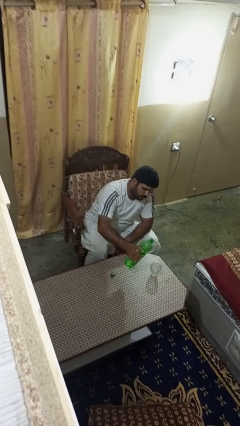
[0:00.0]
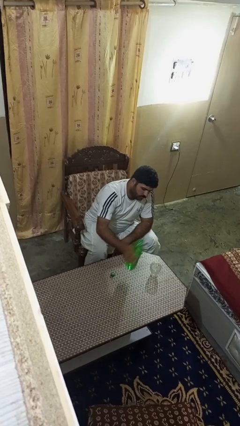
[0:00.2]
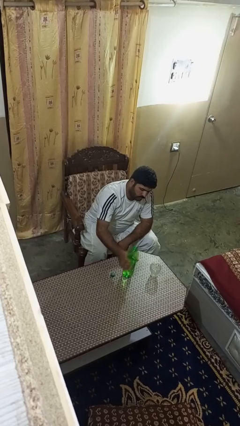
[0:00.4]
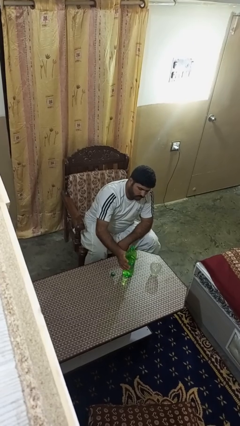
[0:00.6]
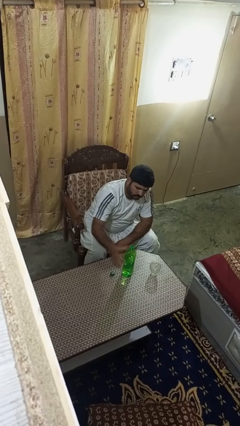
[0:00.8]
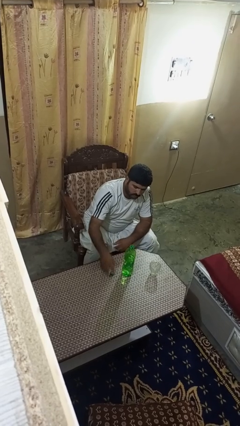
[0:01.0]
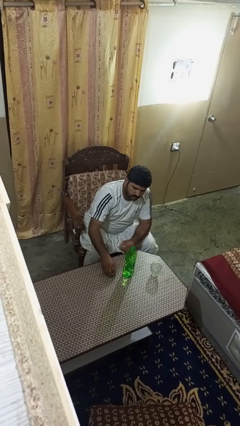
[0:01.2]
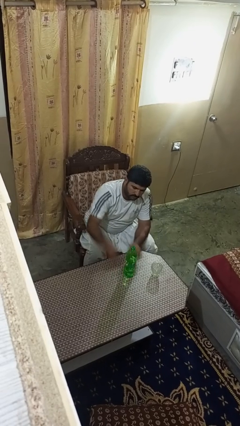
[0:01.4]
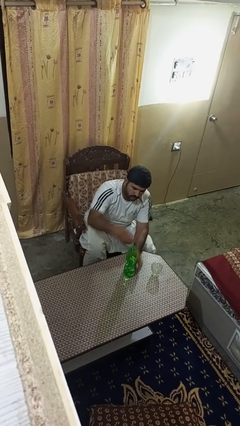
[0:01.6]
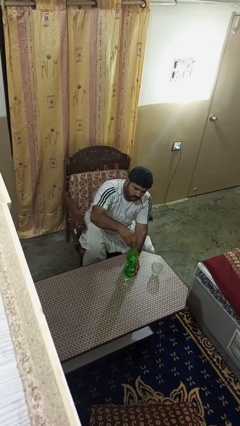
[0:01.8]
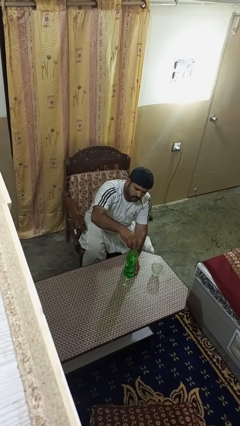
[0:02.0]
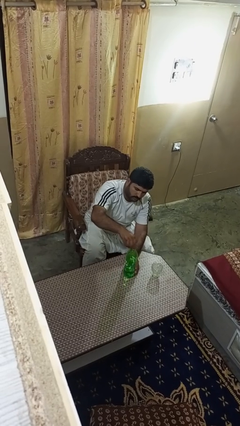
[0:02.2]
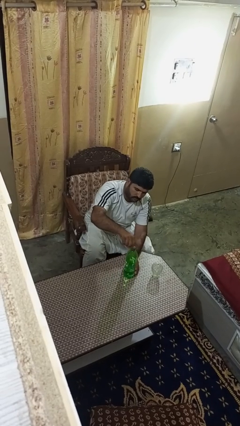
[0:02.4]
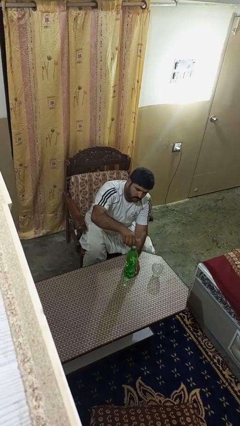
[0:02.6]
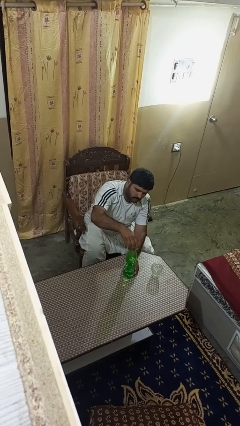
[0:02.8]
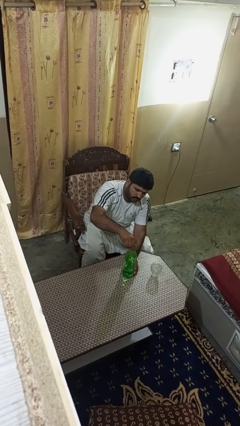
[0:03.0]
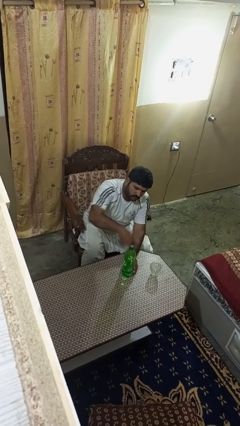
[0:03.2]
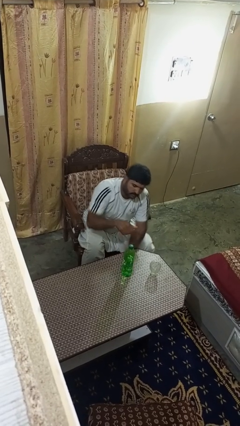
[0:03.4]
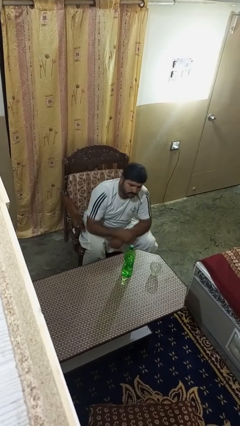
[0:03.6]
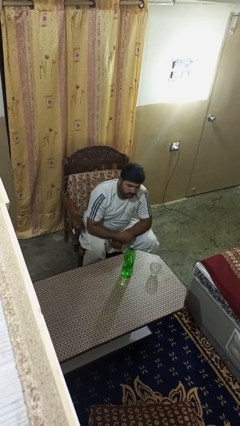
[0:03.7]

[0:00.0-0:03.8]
person screws lid to bottle

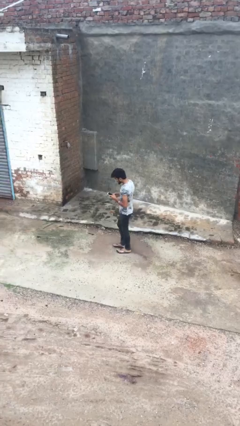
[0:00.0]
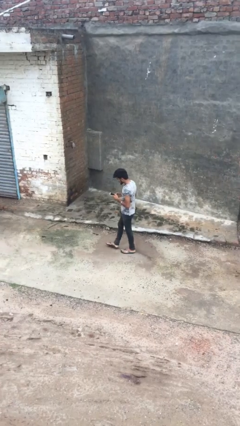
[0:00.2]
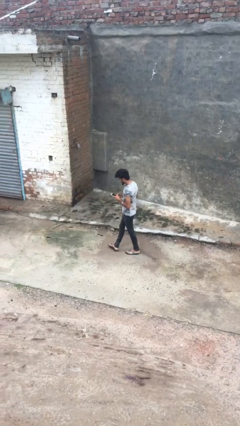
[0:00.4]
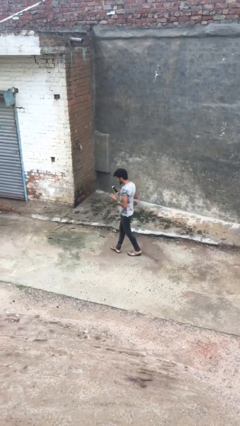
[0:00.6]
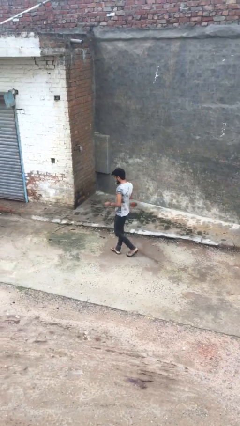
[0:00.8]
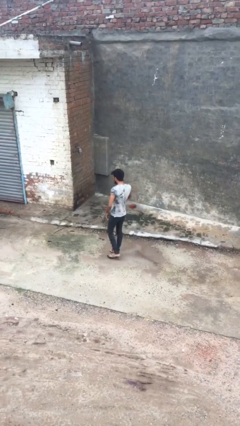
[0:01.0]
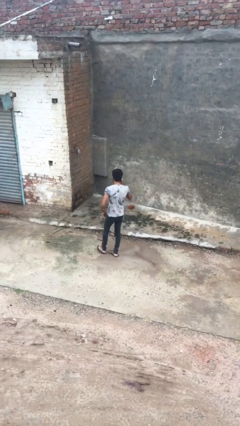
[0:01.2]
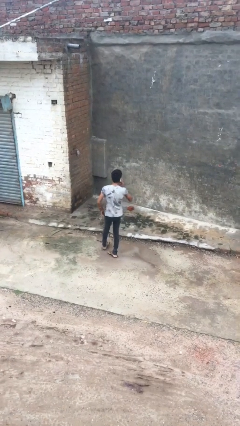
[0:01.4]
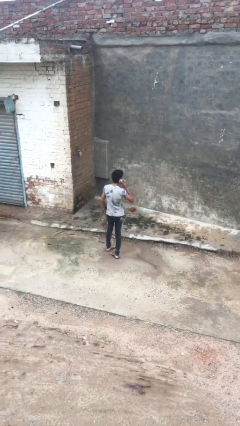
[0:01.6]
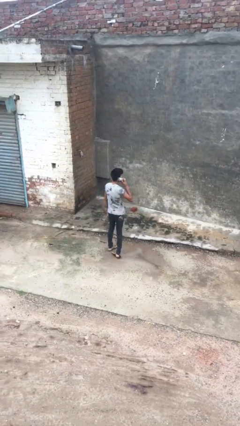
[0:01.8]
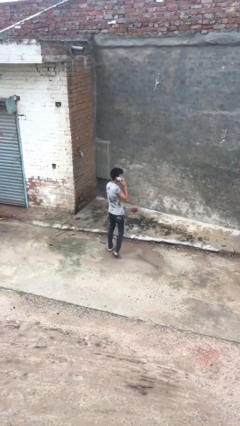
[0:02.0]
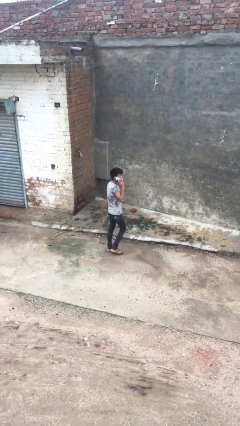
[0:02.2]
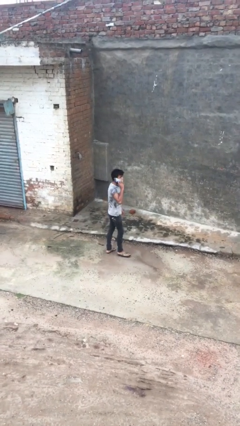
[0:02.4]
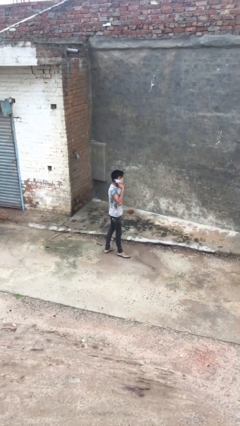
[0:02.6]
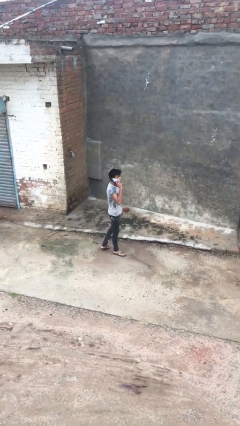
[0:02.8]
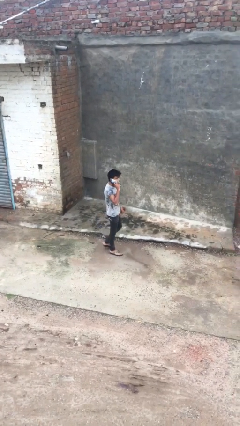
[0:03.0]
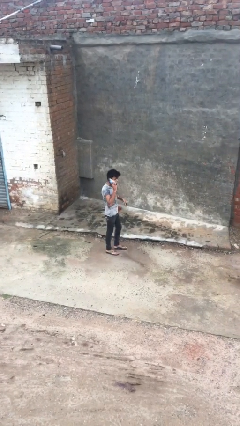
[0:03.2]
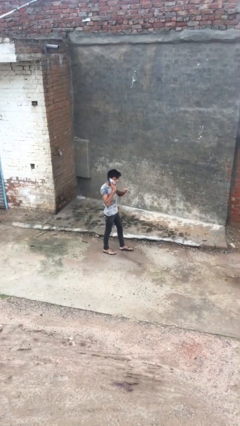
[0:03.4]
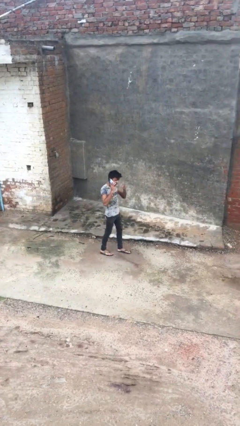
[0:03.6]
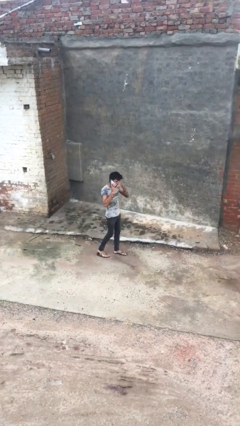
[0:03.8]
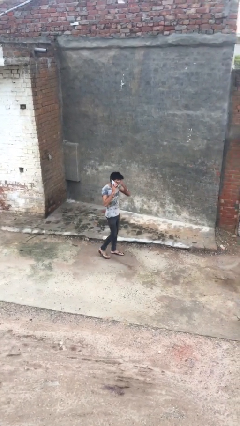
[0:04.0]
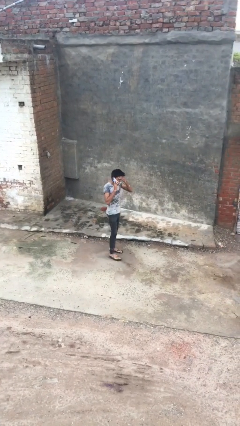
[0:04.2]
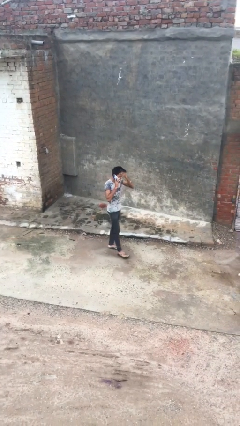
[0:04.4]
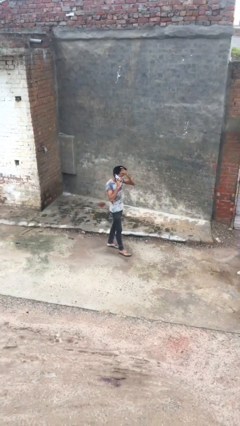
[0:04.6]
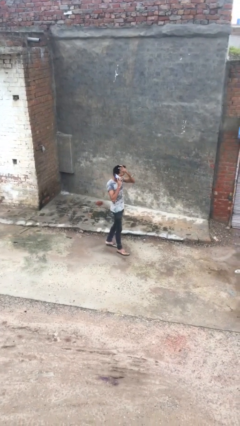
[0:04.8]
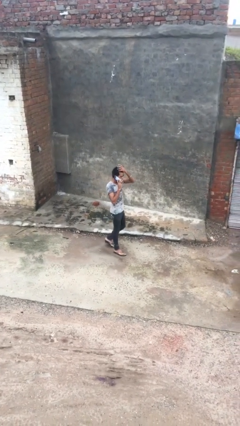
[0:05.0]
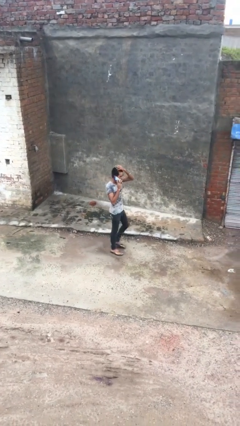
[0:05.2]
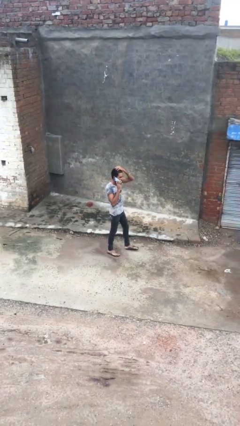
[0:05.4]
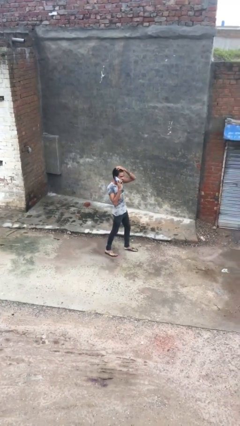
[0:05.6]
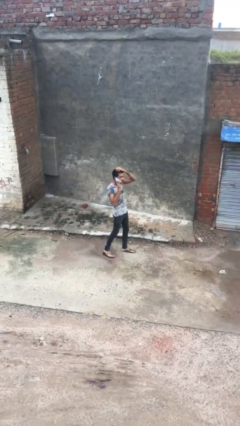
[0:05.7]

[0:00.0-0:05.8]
person talks on phone

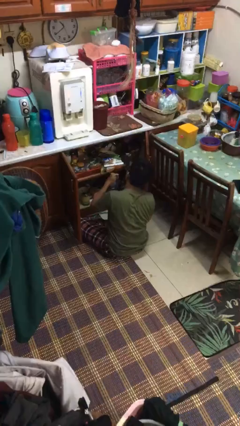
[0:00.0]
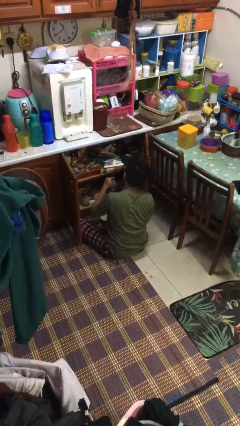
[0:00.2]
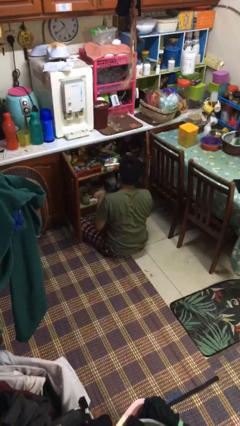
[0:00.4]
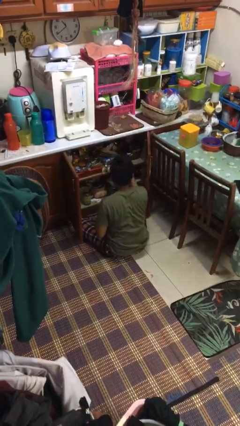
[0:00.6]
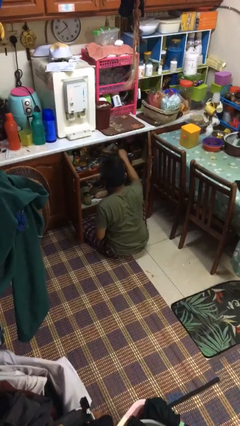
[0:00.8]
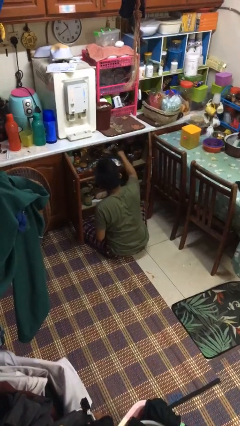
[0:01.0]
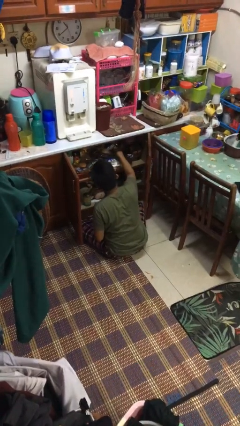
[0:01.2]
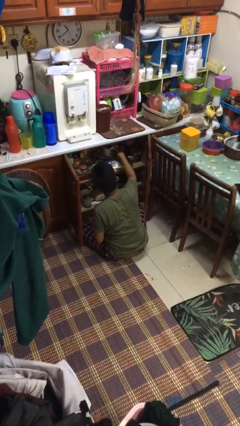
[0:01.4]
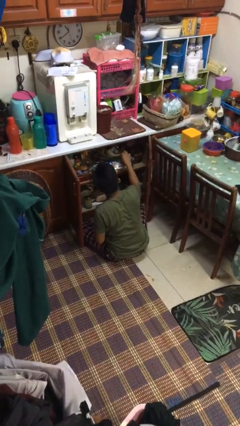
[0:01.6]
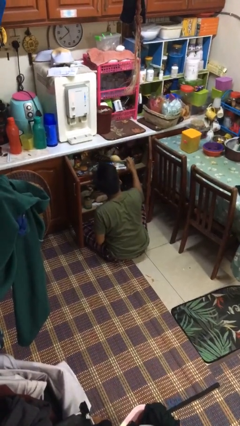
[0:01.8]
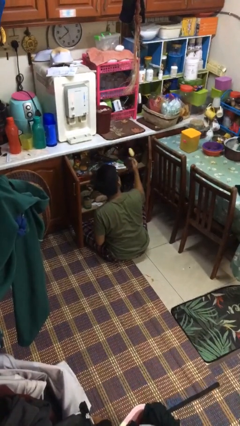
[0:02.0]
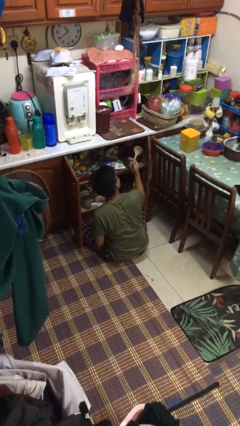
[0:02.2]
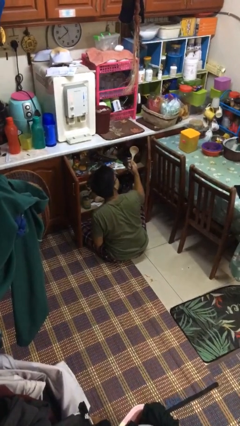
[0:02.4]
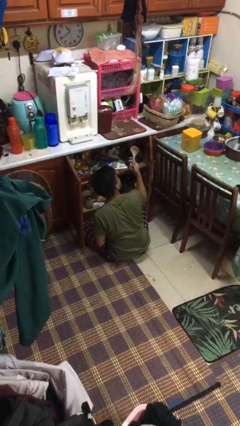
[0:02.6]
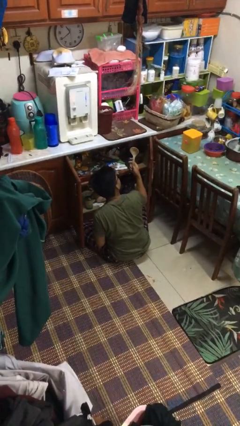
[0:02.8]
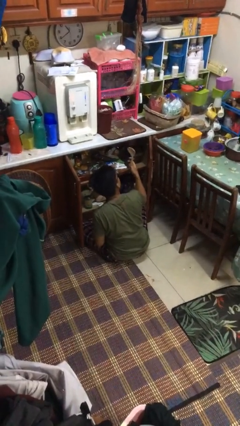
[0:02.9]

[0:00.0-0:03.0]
person takes object from kitchen drawer

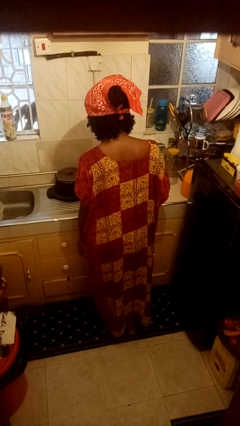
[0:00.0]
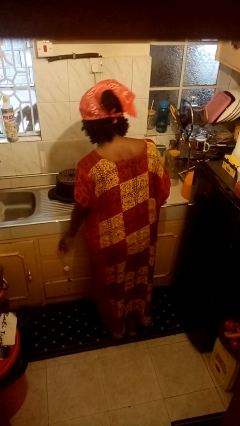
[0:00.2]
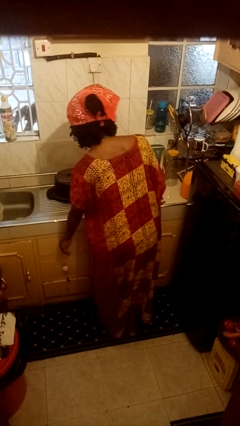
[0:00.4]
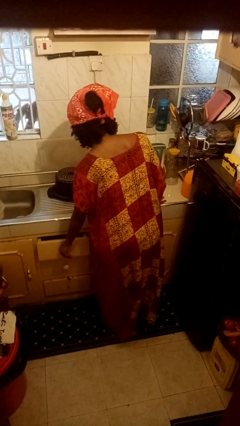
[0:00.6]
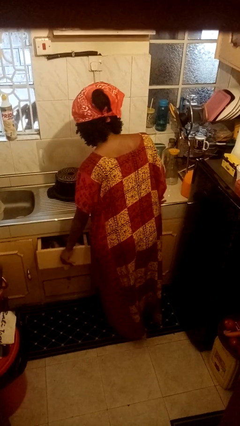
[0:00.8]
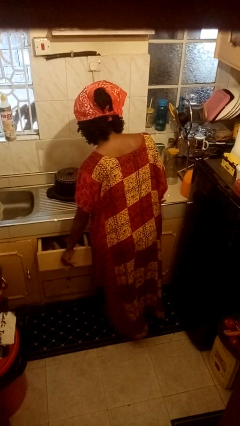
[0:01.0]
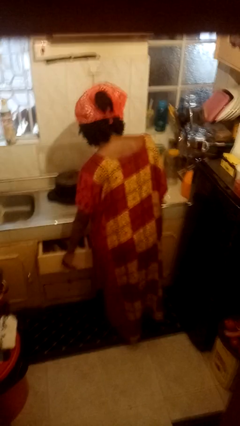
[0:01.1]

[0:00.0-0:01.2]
person opens kitchen drawer

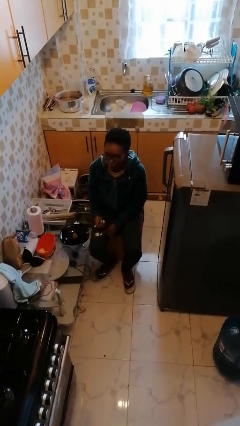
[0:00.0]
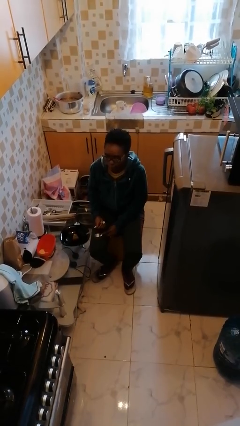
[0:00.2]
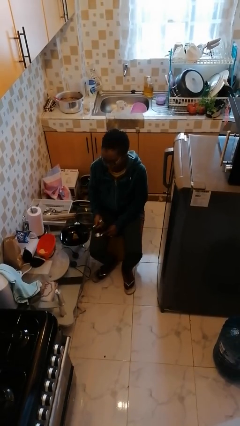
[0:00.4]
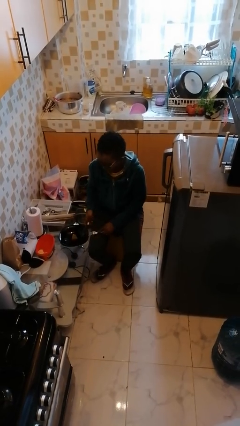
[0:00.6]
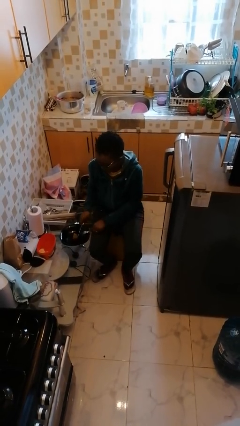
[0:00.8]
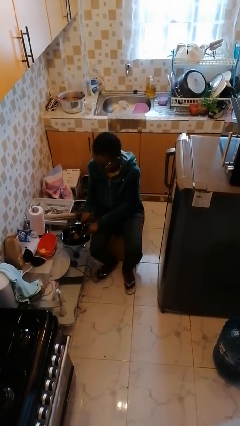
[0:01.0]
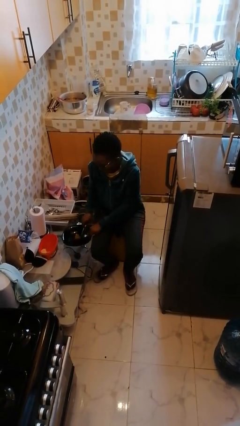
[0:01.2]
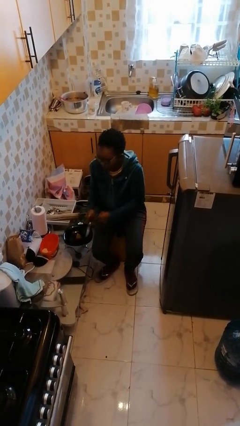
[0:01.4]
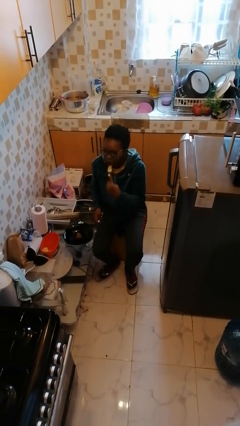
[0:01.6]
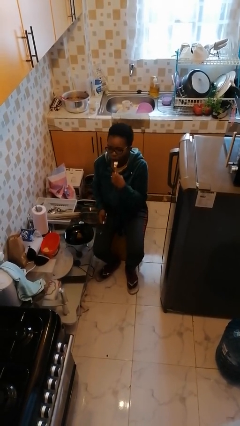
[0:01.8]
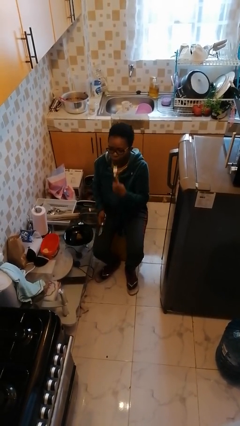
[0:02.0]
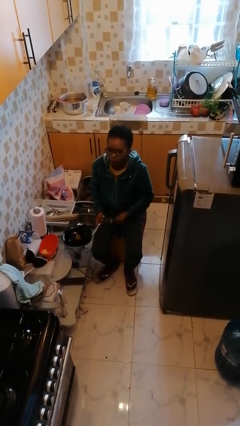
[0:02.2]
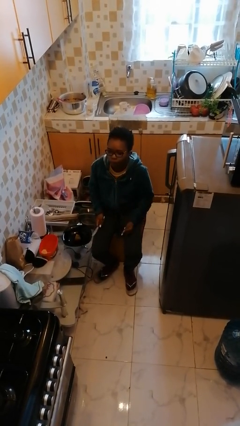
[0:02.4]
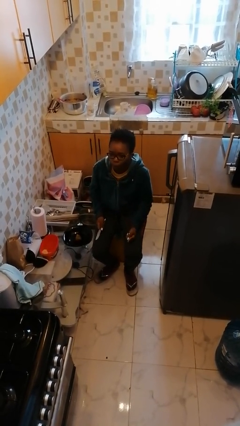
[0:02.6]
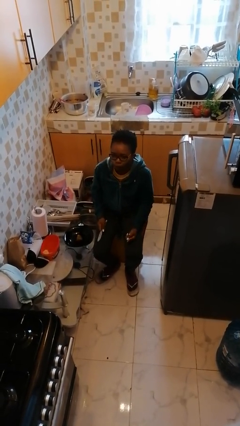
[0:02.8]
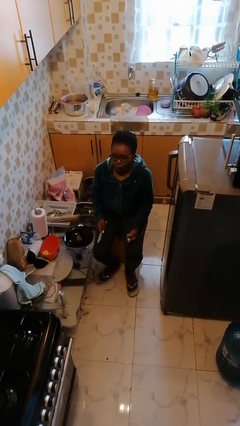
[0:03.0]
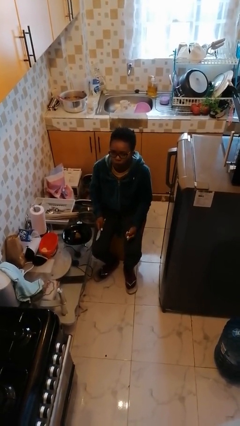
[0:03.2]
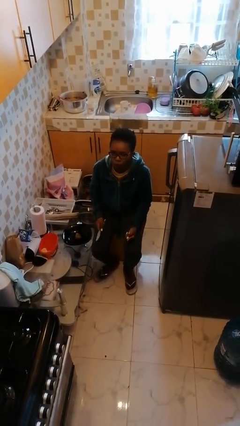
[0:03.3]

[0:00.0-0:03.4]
person eats with utensil

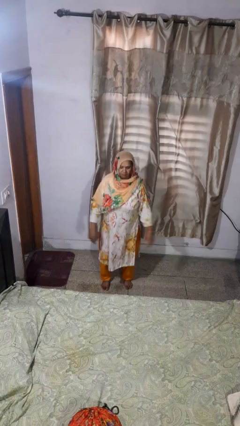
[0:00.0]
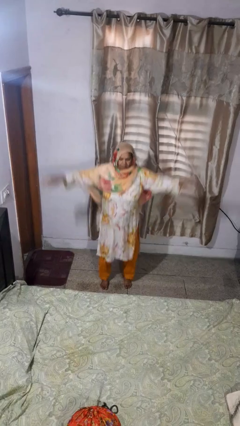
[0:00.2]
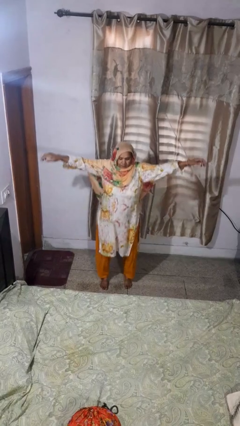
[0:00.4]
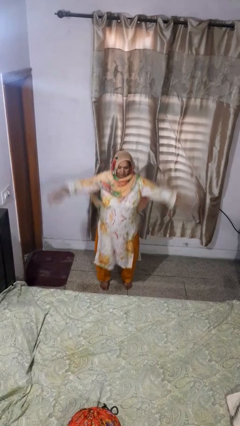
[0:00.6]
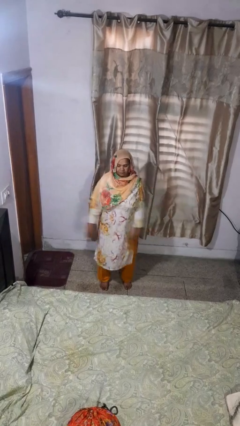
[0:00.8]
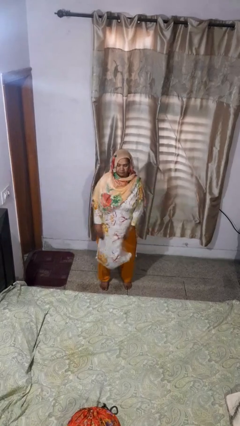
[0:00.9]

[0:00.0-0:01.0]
person jumps
